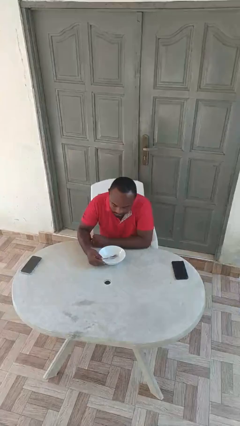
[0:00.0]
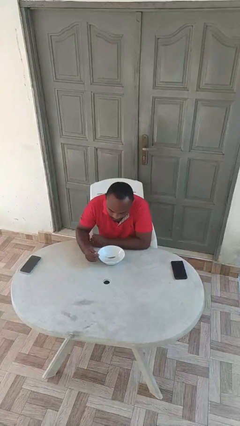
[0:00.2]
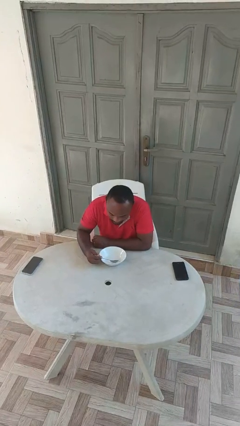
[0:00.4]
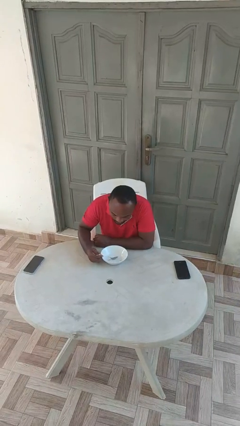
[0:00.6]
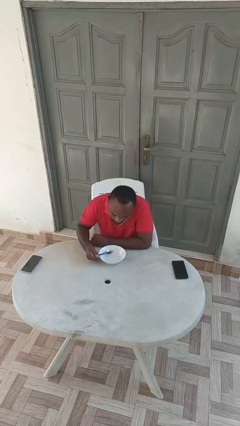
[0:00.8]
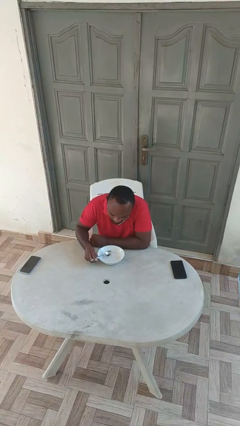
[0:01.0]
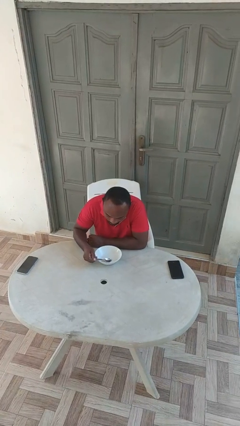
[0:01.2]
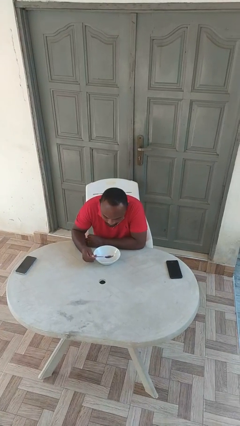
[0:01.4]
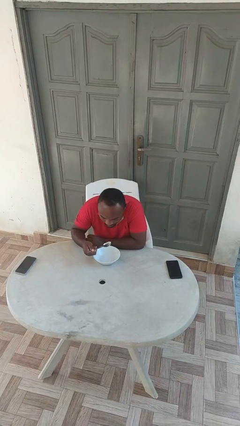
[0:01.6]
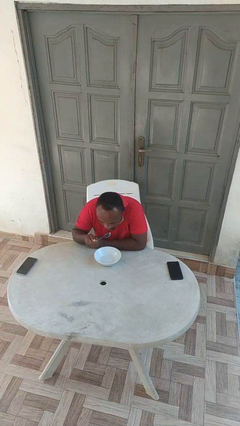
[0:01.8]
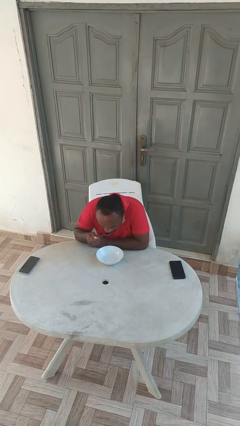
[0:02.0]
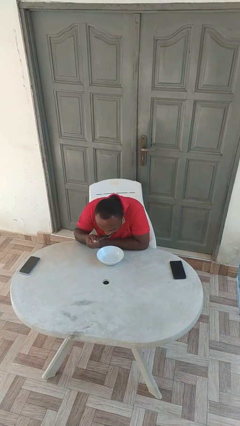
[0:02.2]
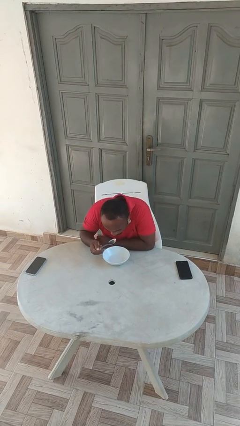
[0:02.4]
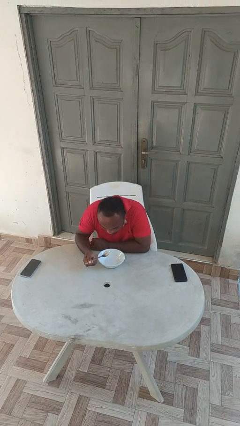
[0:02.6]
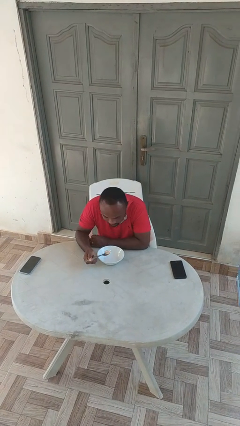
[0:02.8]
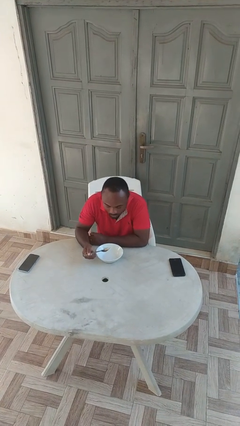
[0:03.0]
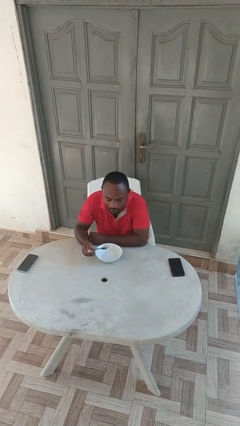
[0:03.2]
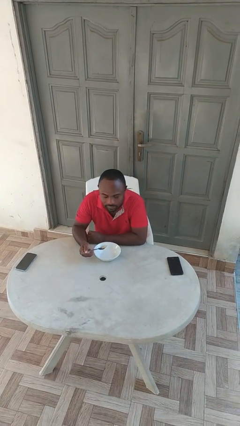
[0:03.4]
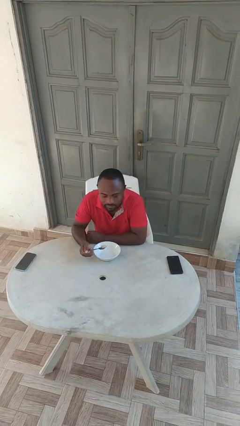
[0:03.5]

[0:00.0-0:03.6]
person eats with utensil

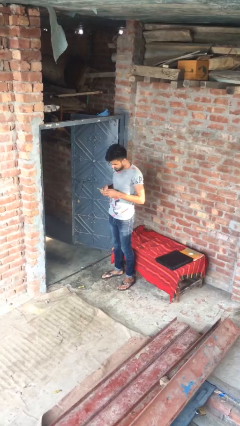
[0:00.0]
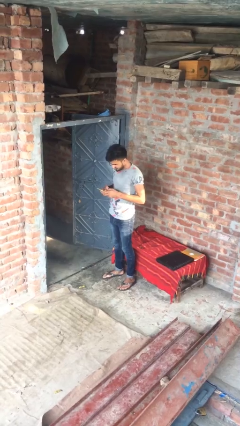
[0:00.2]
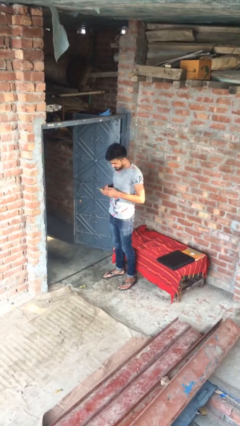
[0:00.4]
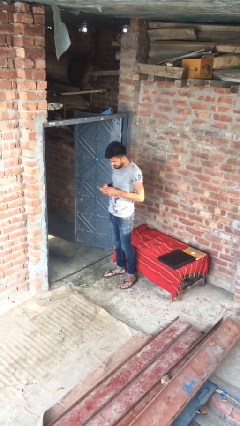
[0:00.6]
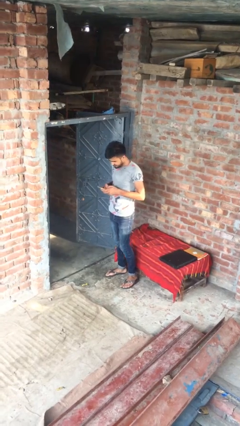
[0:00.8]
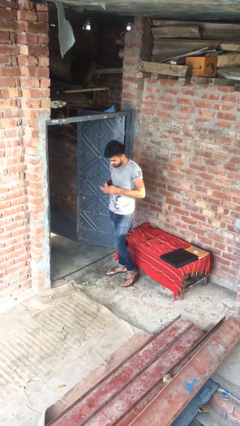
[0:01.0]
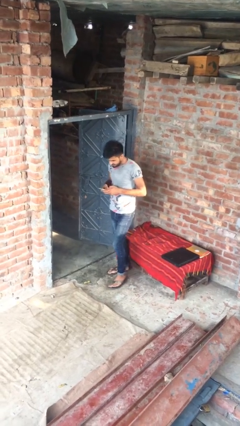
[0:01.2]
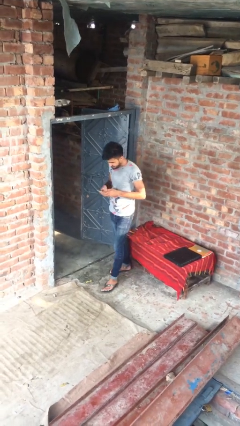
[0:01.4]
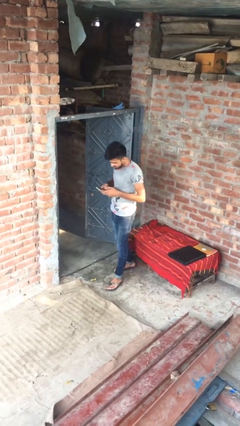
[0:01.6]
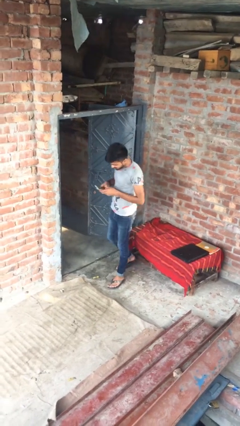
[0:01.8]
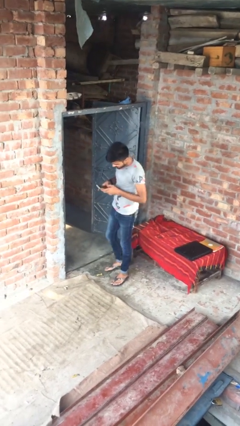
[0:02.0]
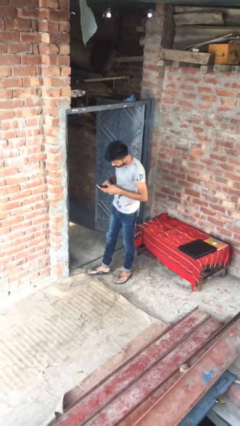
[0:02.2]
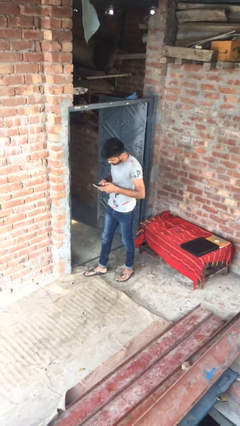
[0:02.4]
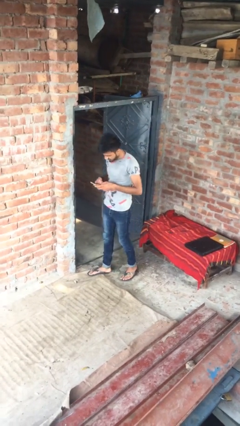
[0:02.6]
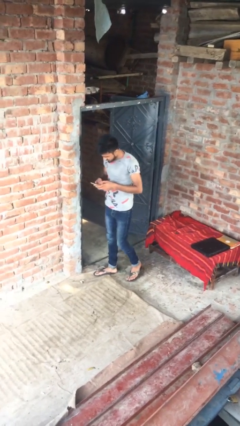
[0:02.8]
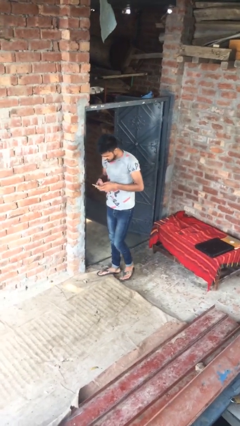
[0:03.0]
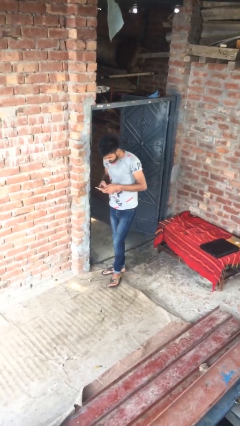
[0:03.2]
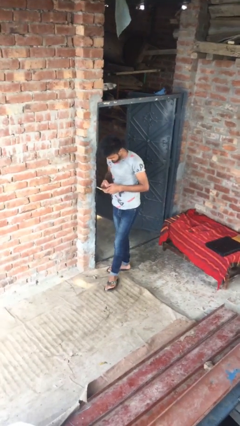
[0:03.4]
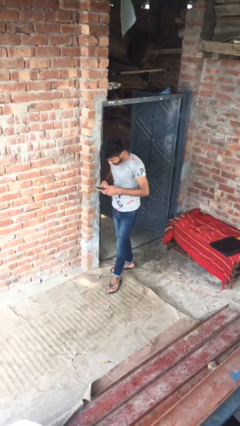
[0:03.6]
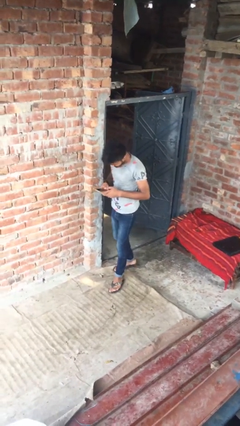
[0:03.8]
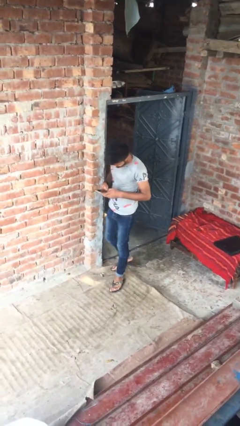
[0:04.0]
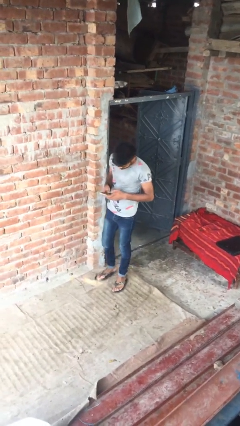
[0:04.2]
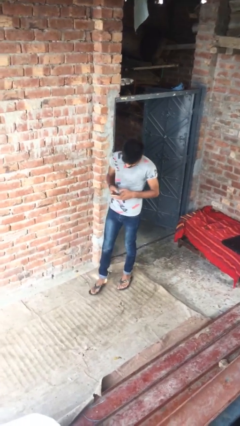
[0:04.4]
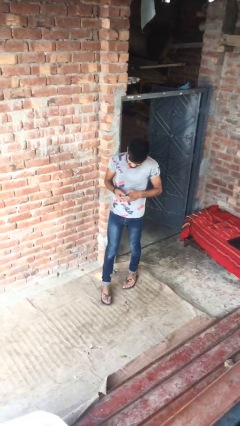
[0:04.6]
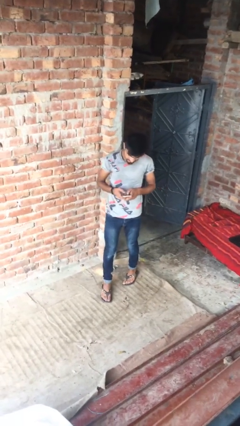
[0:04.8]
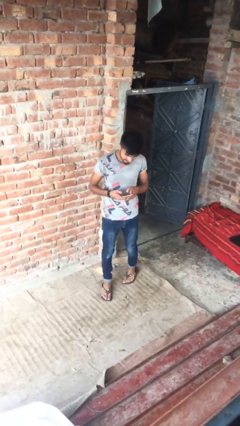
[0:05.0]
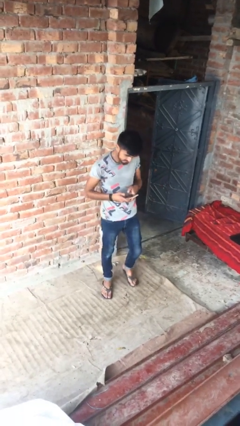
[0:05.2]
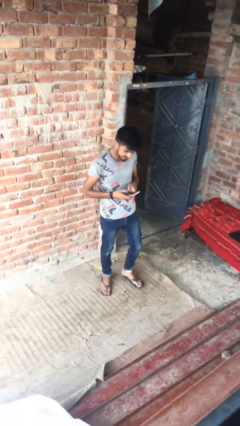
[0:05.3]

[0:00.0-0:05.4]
person texts on phone

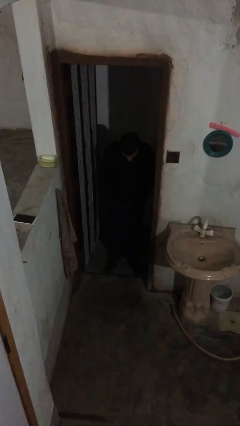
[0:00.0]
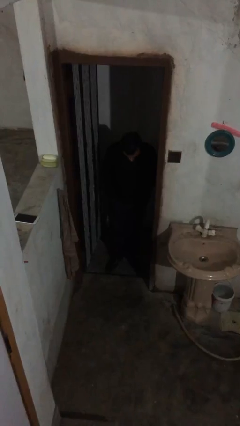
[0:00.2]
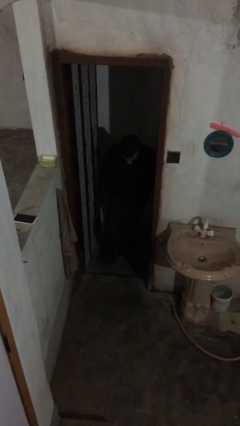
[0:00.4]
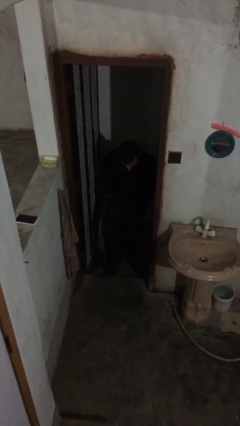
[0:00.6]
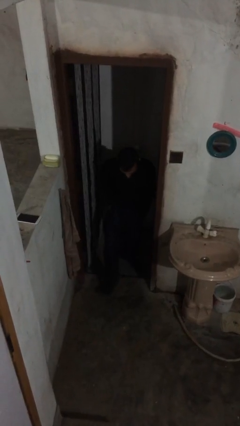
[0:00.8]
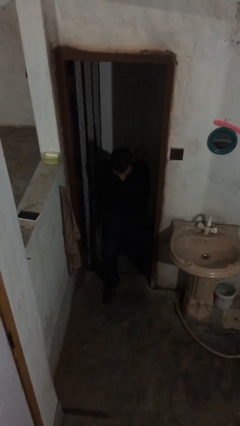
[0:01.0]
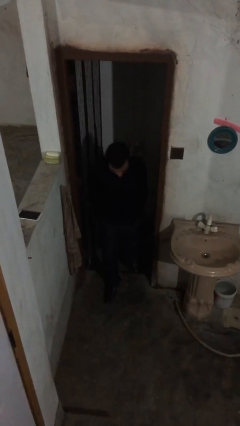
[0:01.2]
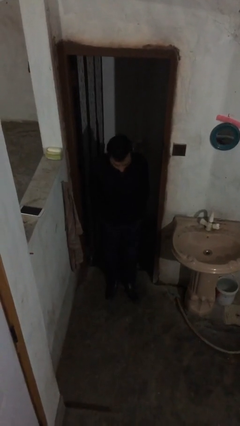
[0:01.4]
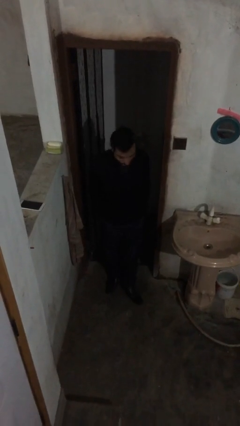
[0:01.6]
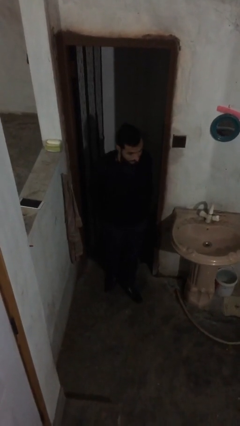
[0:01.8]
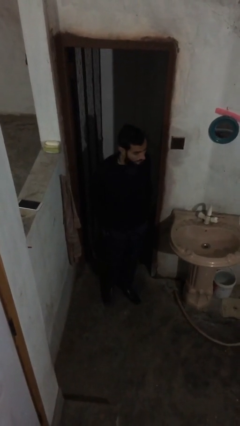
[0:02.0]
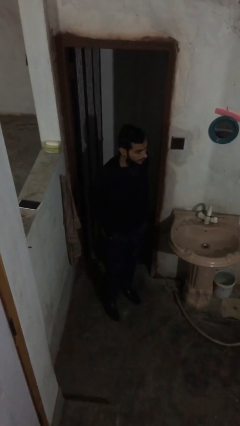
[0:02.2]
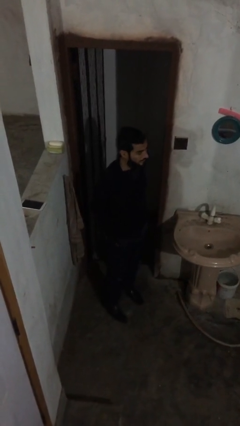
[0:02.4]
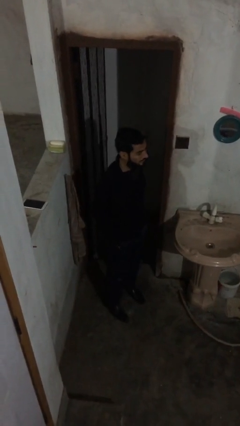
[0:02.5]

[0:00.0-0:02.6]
person enters scene through structure

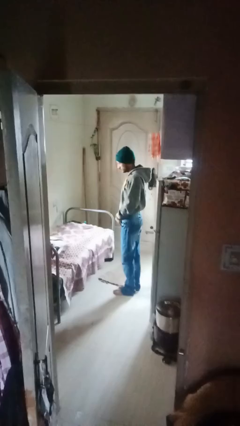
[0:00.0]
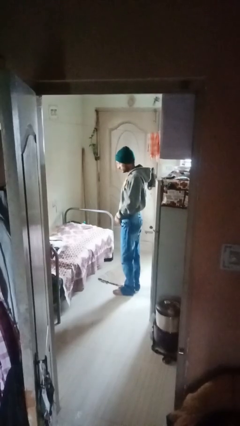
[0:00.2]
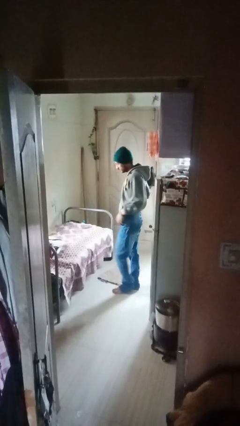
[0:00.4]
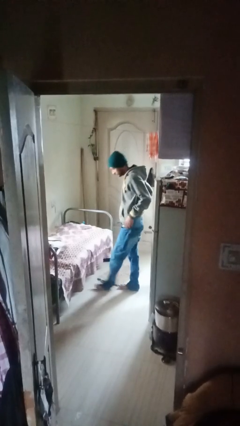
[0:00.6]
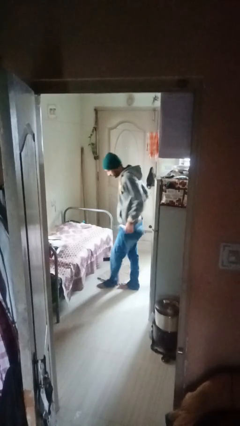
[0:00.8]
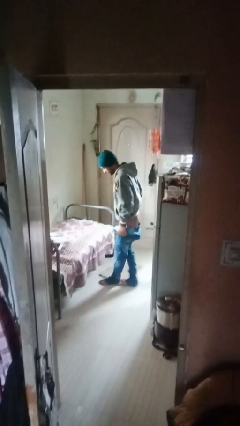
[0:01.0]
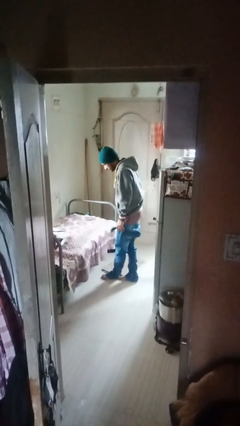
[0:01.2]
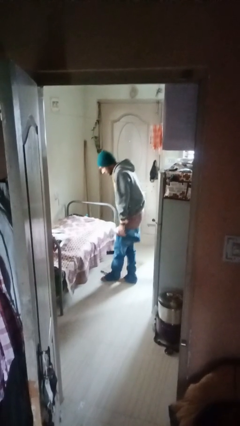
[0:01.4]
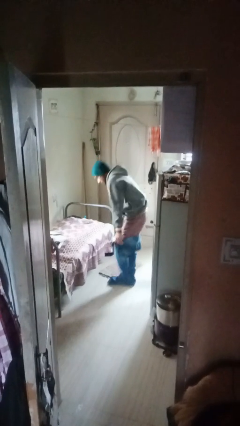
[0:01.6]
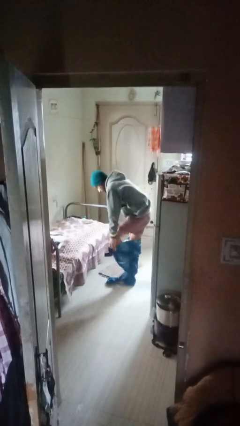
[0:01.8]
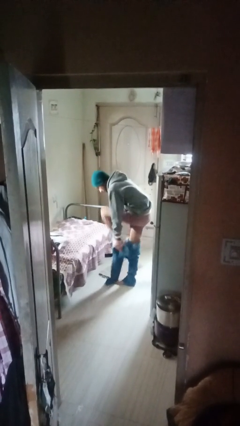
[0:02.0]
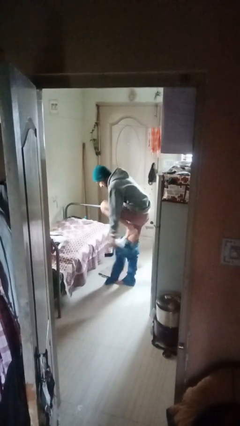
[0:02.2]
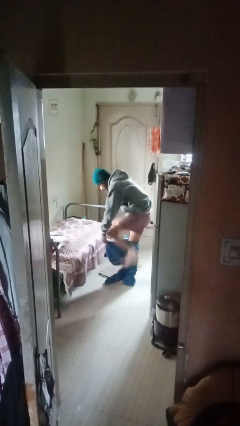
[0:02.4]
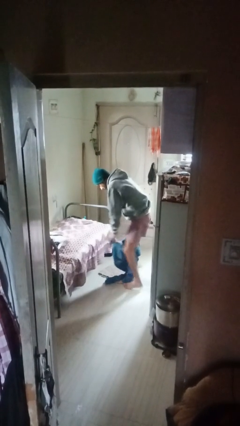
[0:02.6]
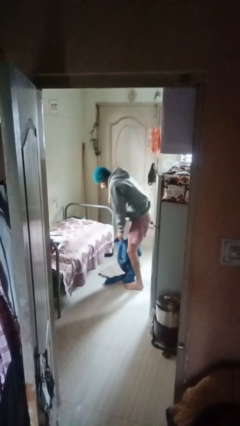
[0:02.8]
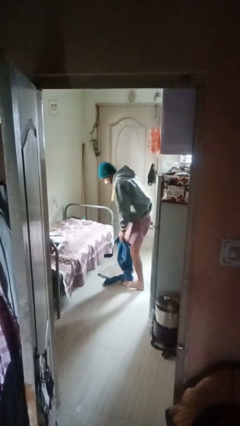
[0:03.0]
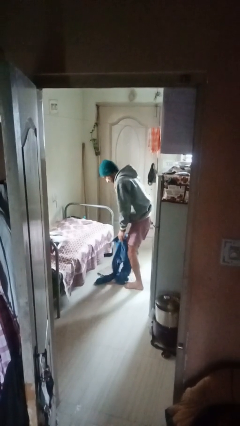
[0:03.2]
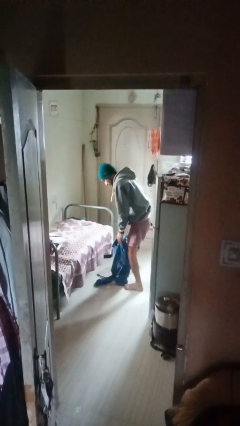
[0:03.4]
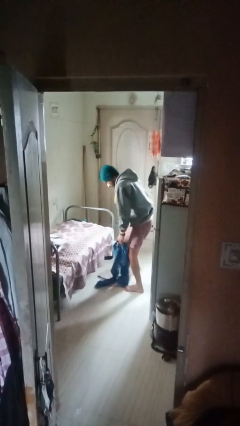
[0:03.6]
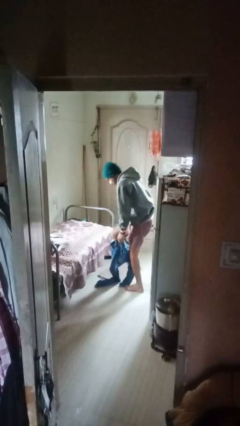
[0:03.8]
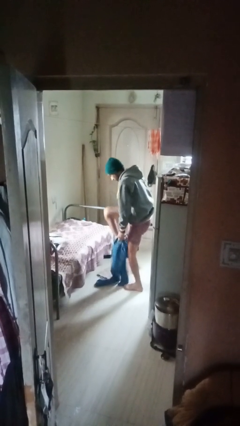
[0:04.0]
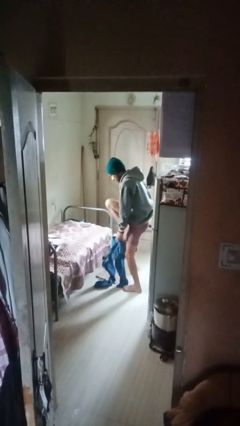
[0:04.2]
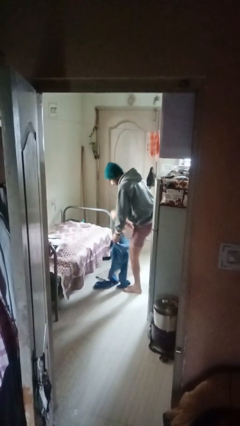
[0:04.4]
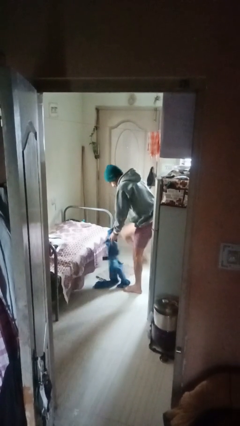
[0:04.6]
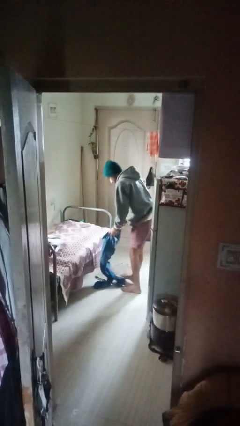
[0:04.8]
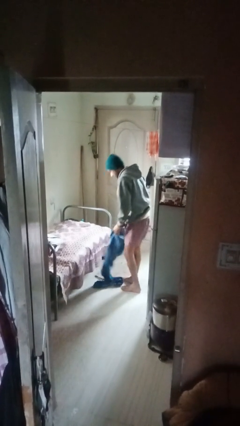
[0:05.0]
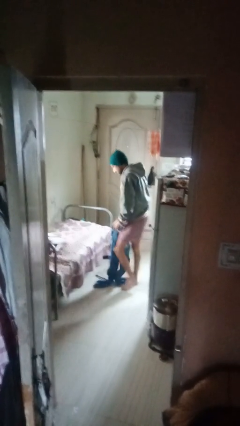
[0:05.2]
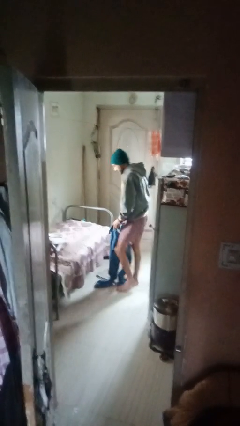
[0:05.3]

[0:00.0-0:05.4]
person takes off pants

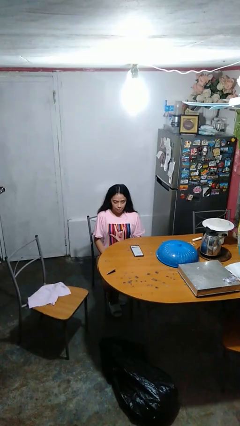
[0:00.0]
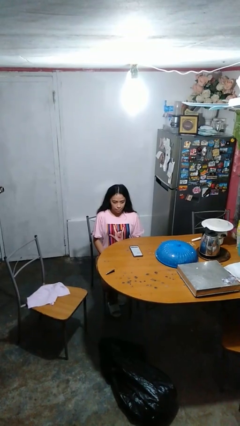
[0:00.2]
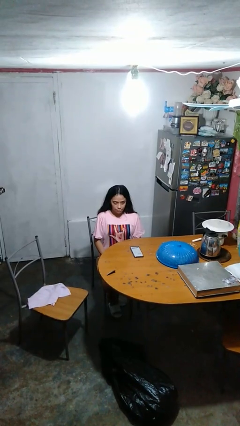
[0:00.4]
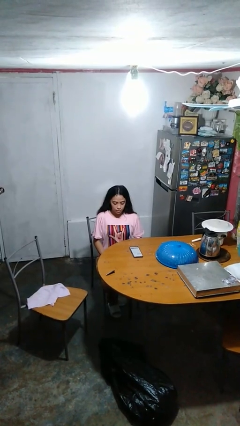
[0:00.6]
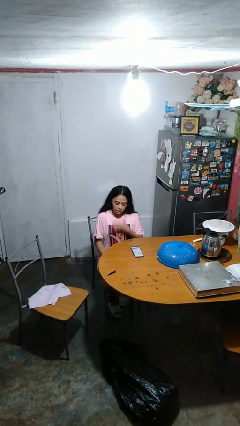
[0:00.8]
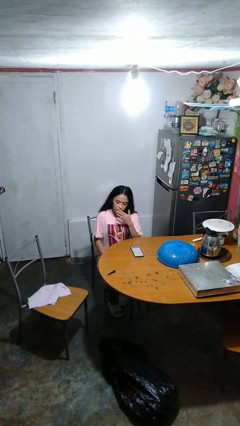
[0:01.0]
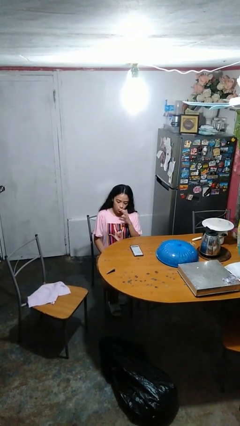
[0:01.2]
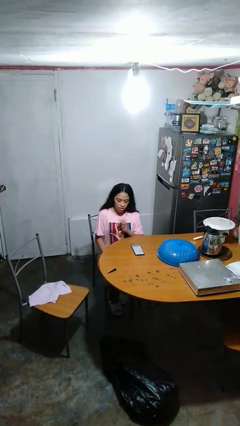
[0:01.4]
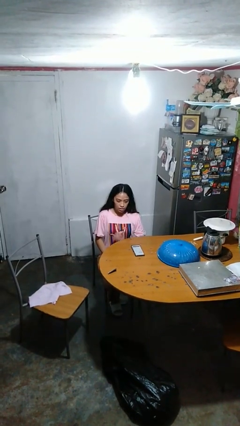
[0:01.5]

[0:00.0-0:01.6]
person licks fingers
